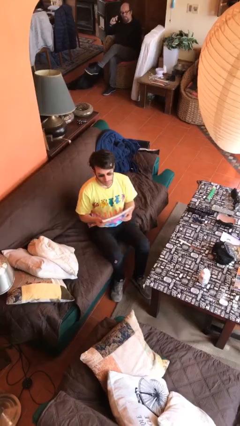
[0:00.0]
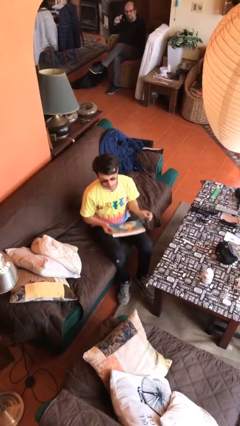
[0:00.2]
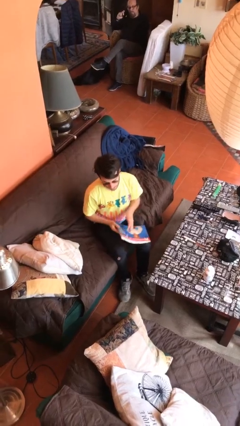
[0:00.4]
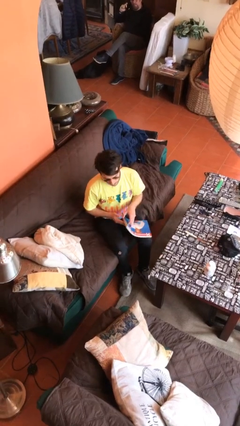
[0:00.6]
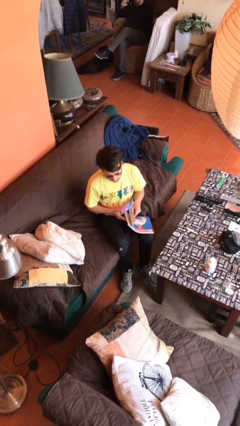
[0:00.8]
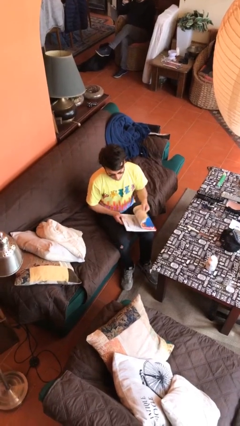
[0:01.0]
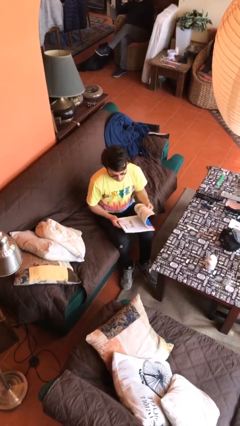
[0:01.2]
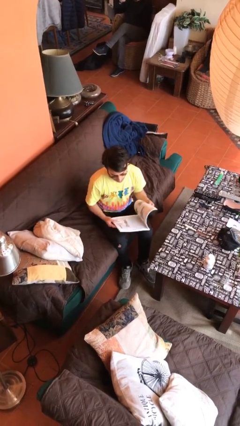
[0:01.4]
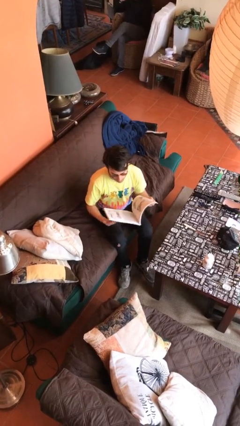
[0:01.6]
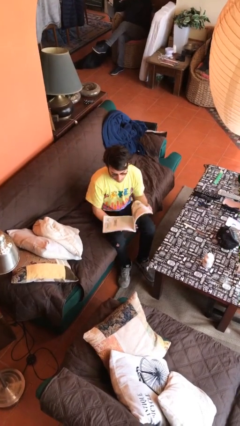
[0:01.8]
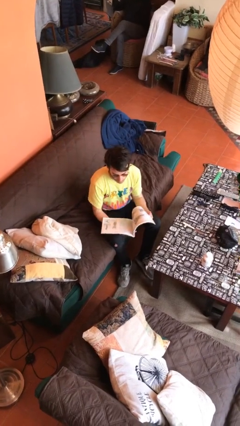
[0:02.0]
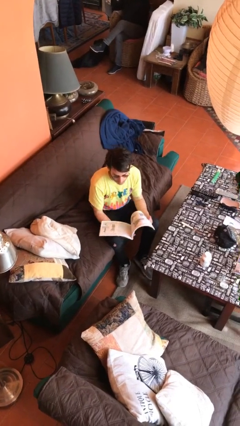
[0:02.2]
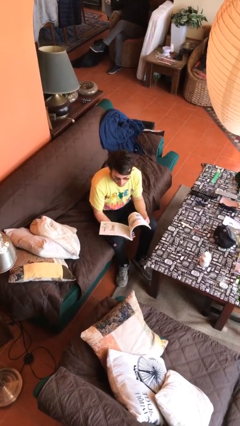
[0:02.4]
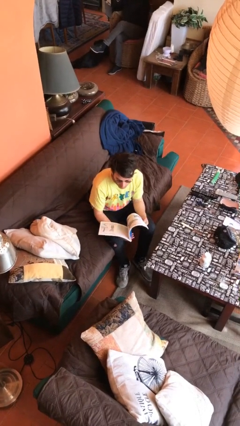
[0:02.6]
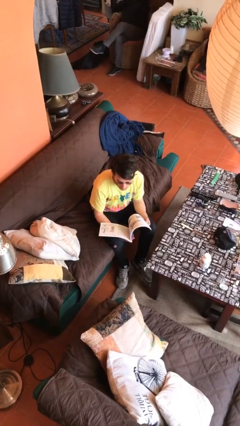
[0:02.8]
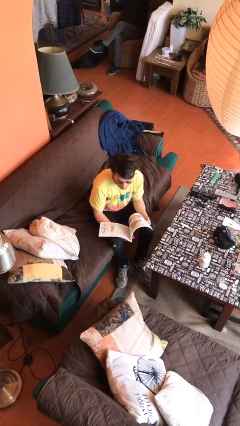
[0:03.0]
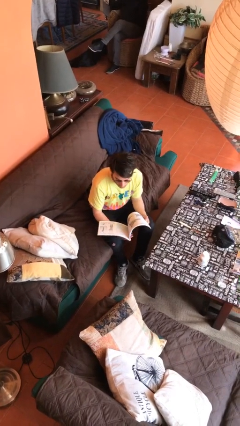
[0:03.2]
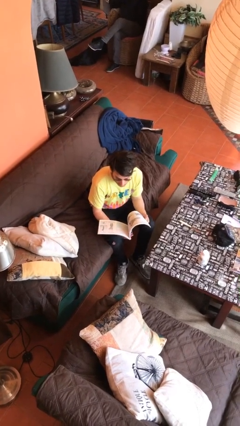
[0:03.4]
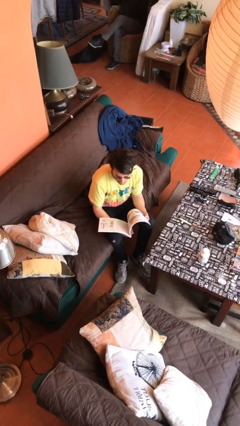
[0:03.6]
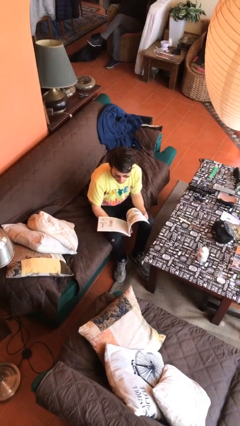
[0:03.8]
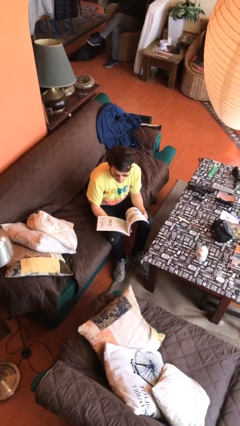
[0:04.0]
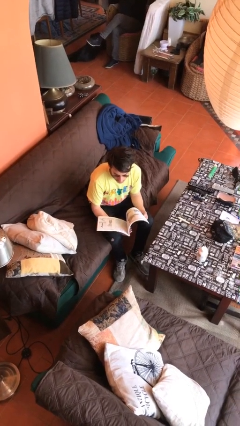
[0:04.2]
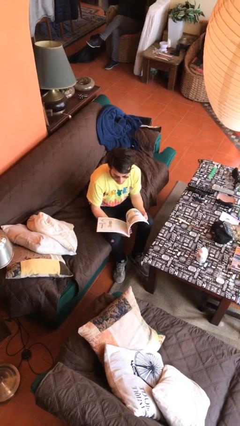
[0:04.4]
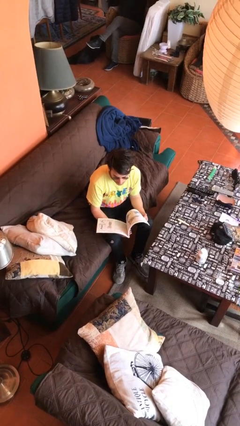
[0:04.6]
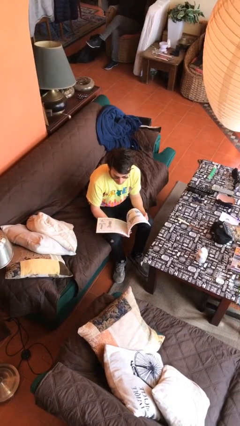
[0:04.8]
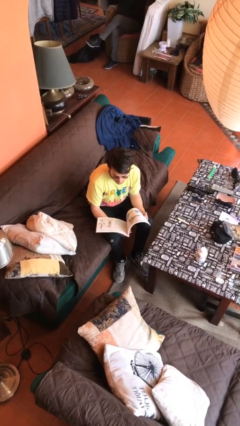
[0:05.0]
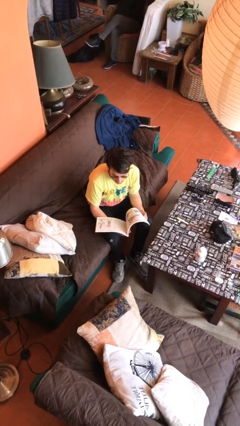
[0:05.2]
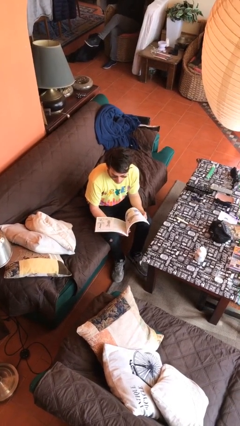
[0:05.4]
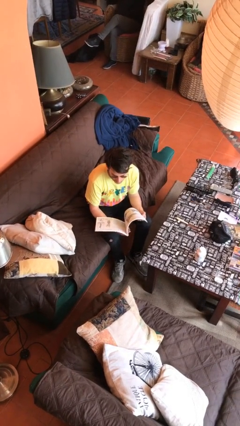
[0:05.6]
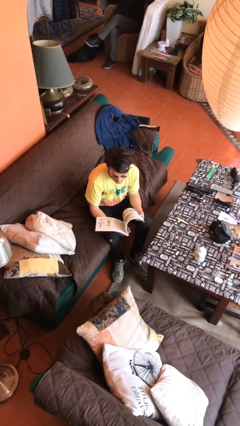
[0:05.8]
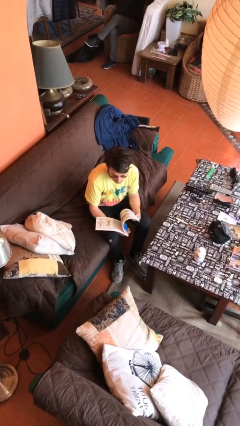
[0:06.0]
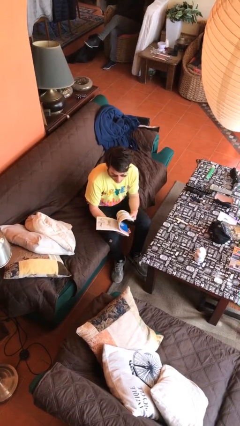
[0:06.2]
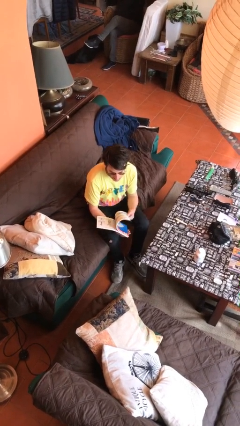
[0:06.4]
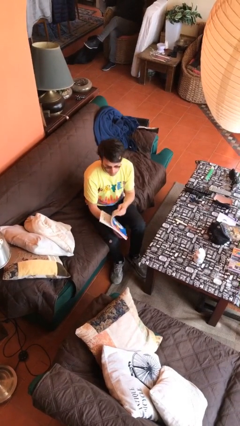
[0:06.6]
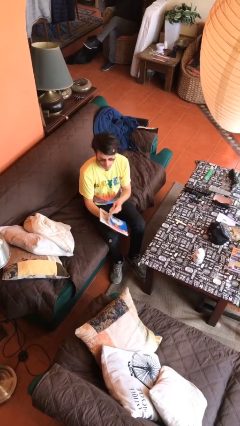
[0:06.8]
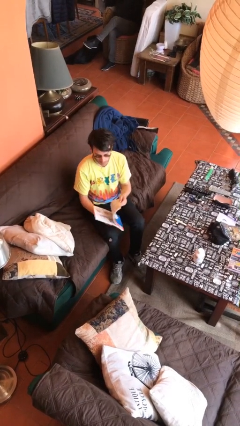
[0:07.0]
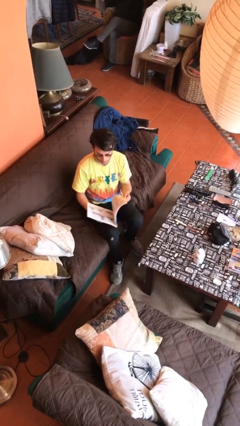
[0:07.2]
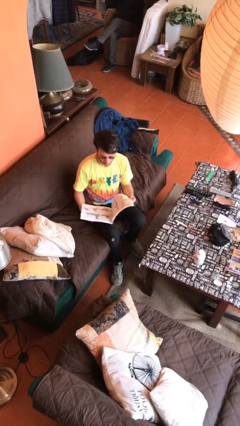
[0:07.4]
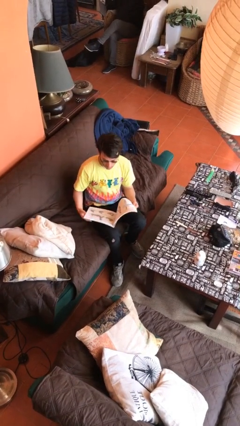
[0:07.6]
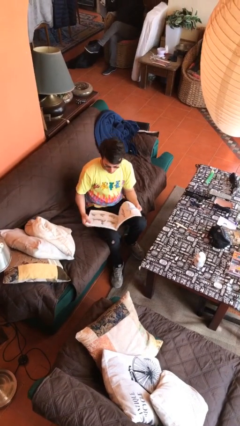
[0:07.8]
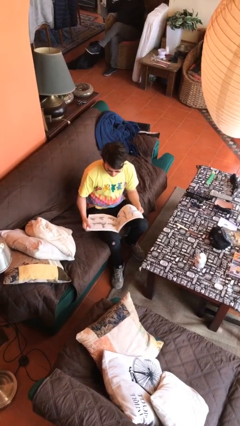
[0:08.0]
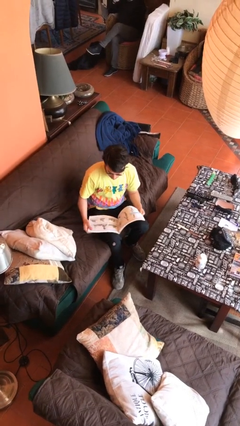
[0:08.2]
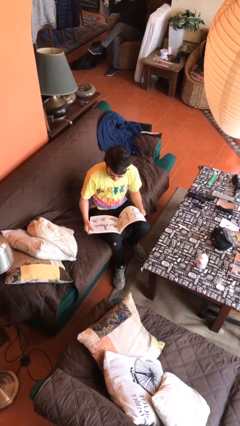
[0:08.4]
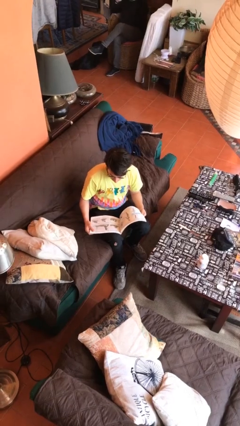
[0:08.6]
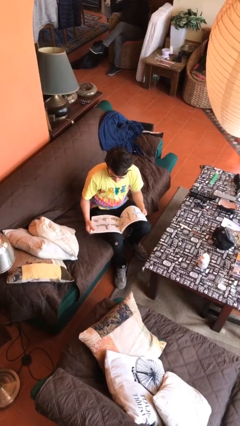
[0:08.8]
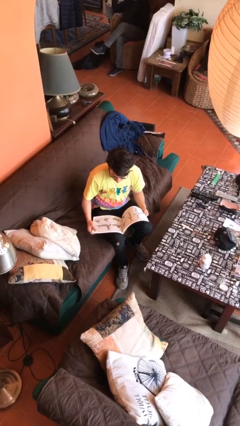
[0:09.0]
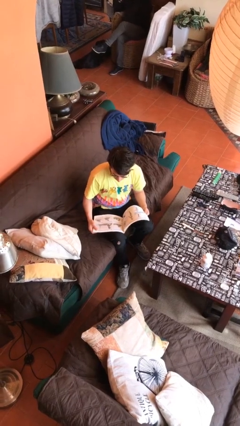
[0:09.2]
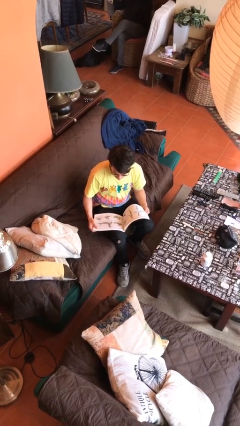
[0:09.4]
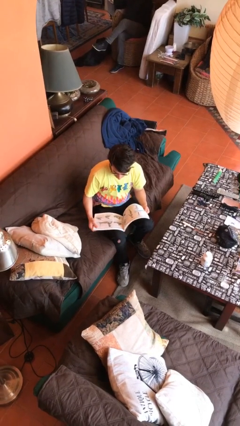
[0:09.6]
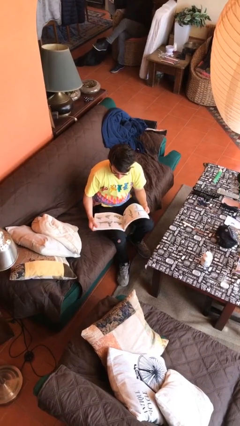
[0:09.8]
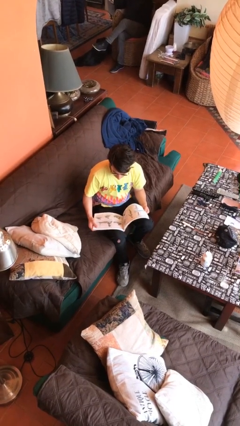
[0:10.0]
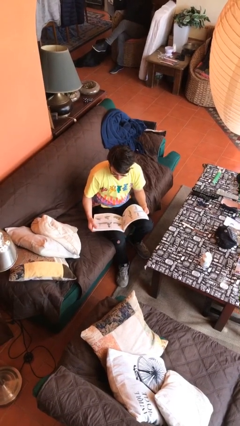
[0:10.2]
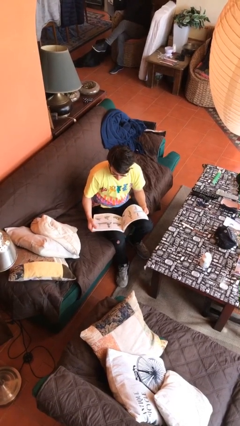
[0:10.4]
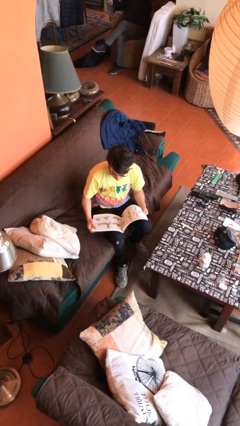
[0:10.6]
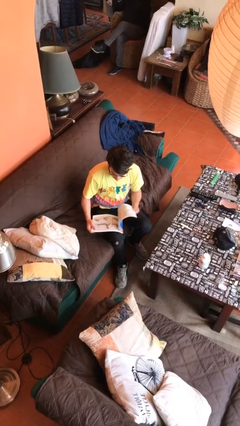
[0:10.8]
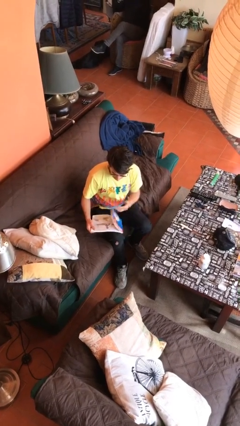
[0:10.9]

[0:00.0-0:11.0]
person reads document

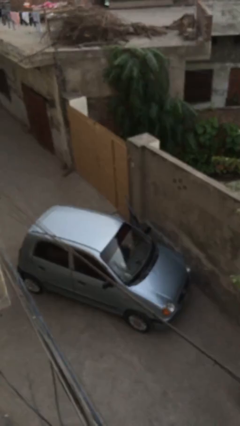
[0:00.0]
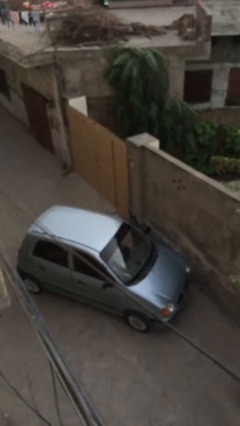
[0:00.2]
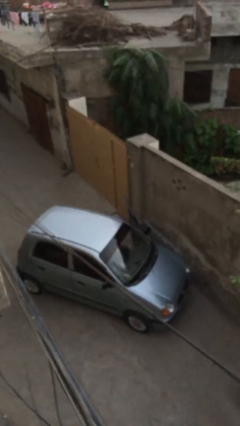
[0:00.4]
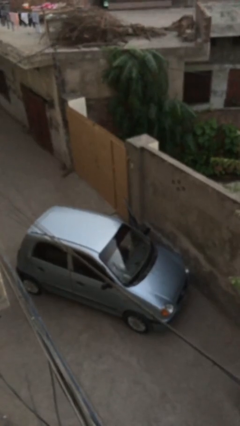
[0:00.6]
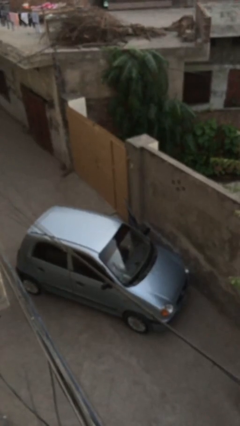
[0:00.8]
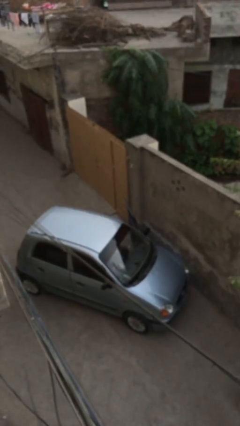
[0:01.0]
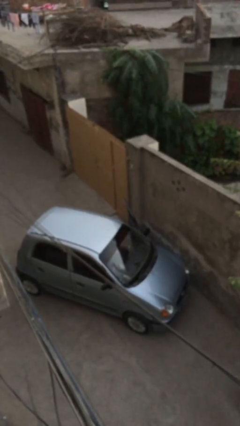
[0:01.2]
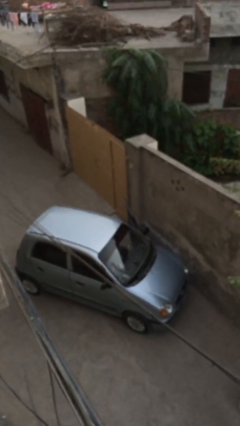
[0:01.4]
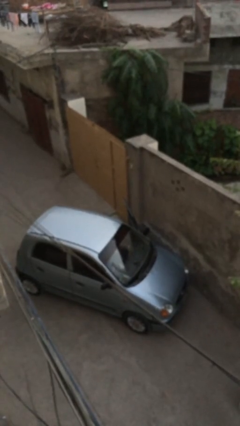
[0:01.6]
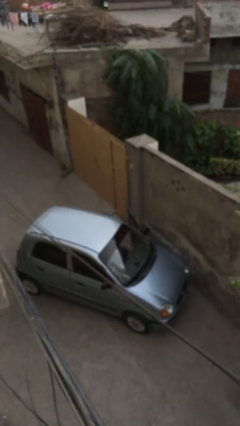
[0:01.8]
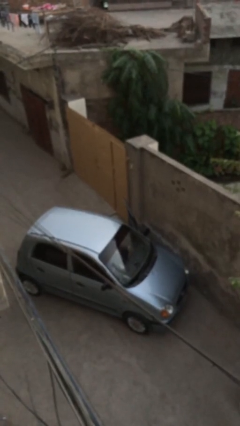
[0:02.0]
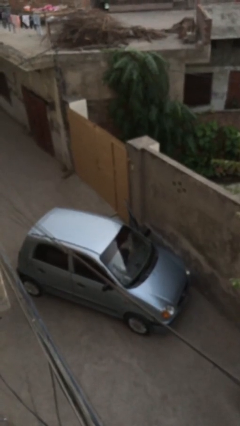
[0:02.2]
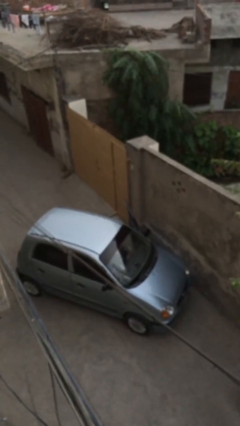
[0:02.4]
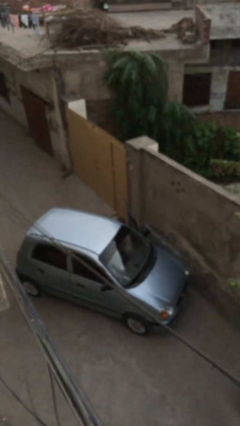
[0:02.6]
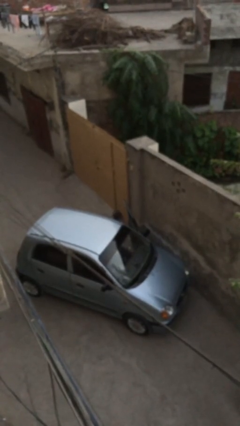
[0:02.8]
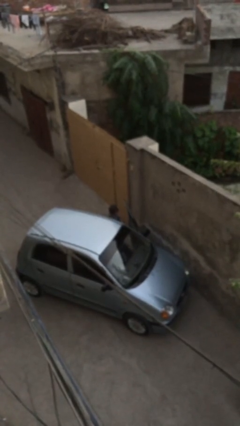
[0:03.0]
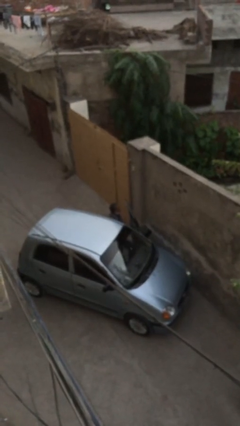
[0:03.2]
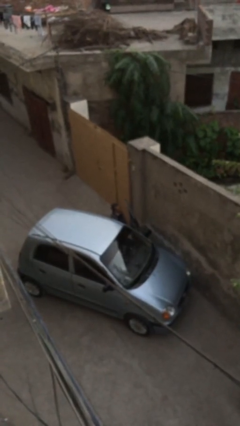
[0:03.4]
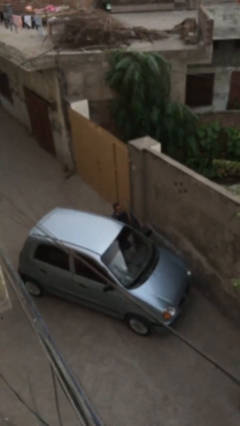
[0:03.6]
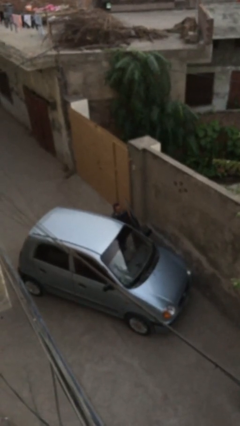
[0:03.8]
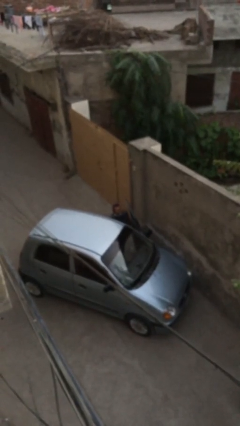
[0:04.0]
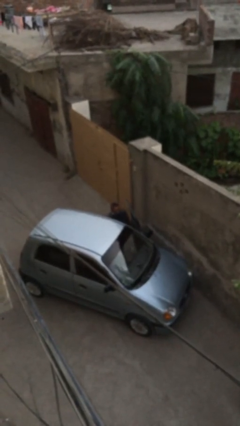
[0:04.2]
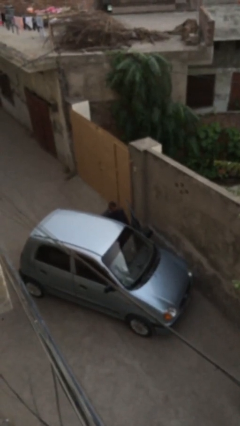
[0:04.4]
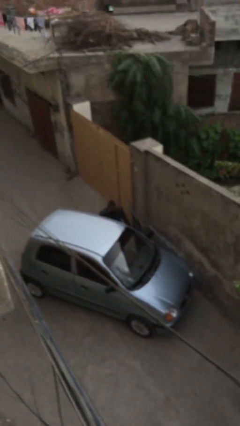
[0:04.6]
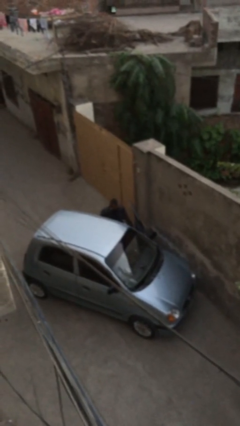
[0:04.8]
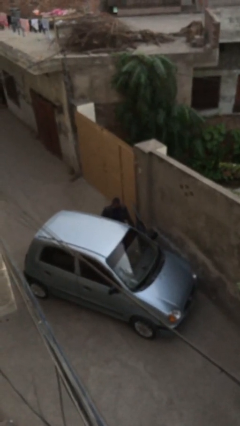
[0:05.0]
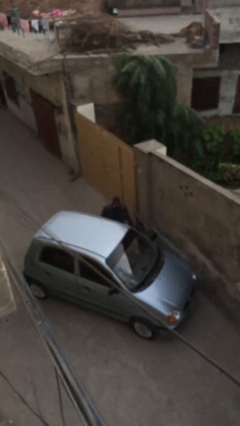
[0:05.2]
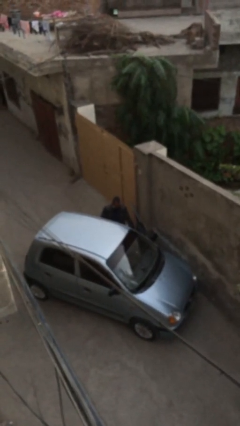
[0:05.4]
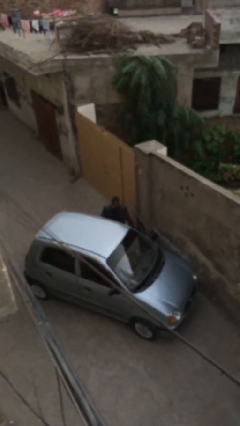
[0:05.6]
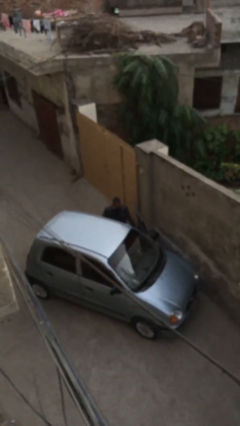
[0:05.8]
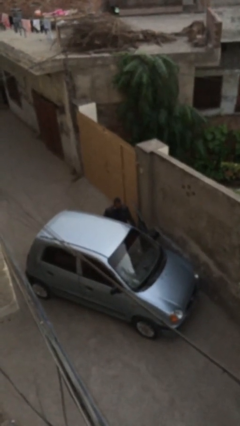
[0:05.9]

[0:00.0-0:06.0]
person exits car

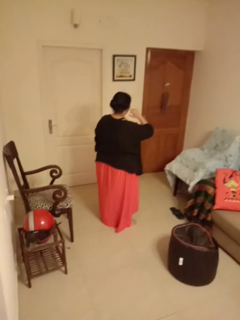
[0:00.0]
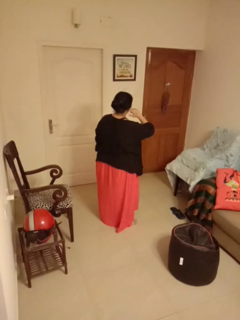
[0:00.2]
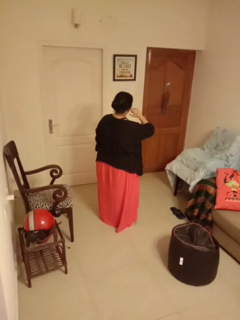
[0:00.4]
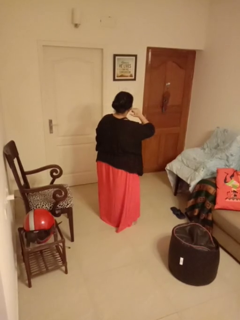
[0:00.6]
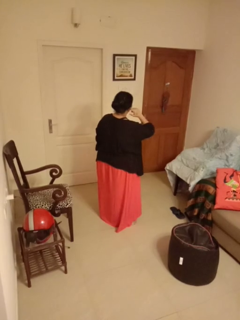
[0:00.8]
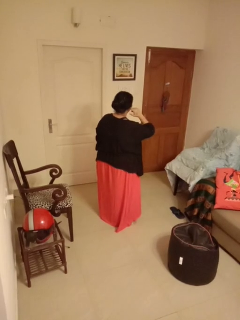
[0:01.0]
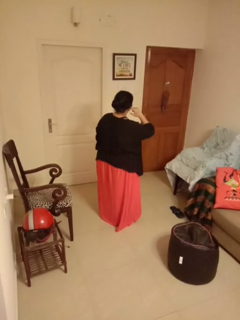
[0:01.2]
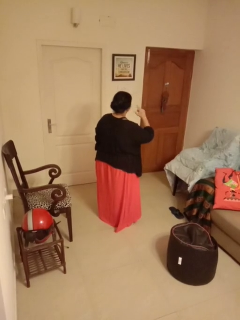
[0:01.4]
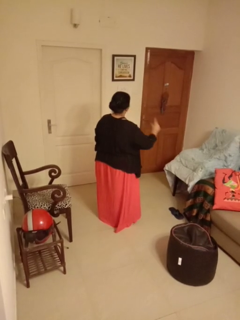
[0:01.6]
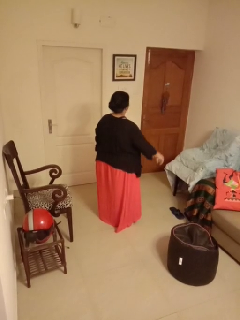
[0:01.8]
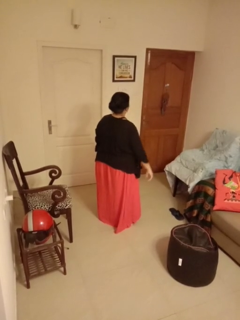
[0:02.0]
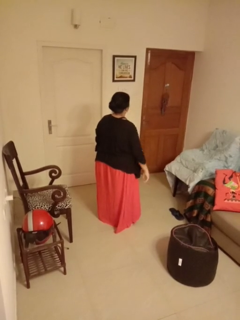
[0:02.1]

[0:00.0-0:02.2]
person gestures listen closely
